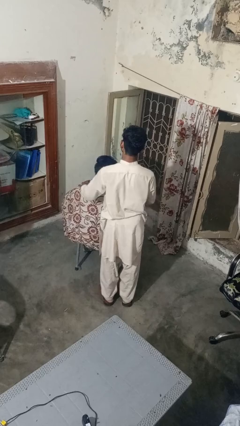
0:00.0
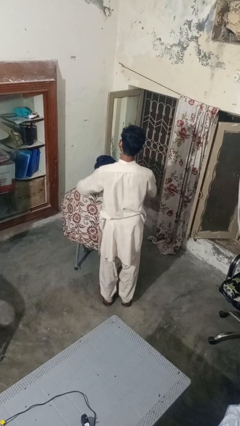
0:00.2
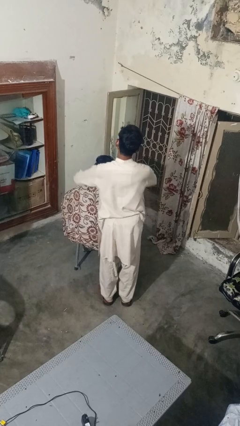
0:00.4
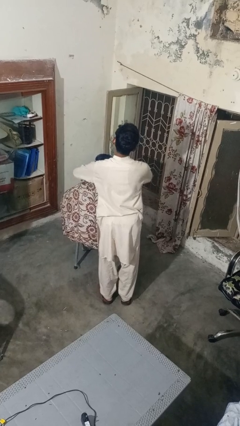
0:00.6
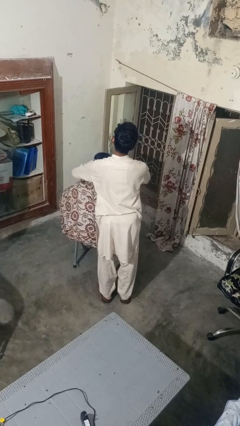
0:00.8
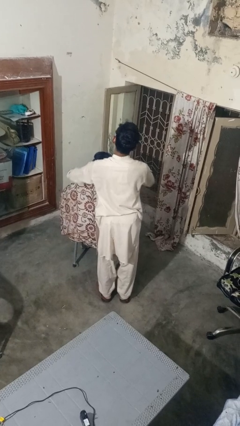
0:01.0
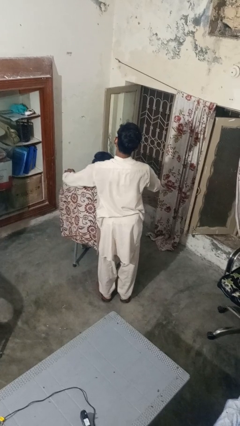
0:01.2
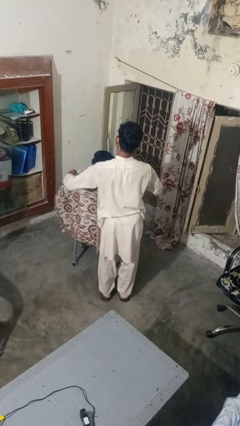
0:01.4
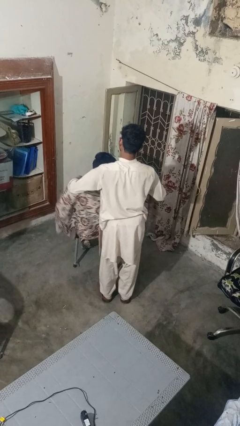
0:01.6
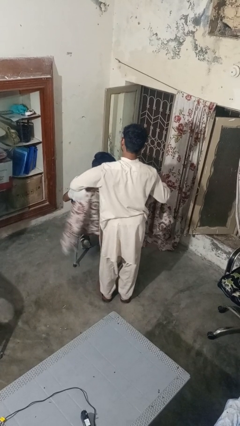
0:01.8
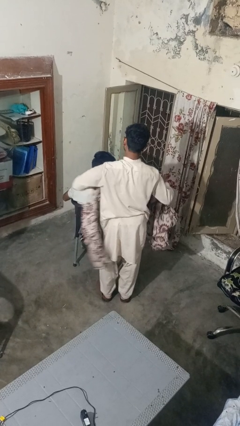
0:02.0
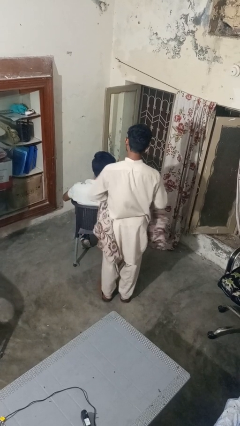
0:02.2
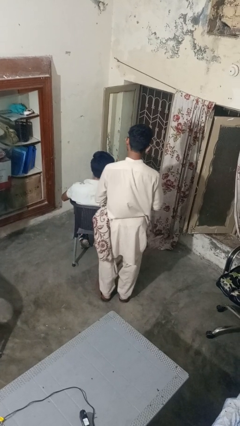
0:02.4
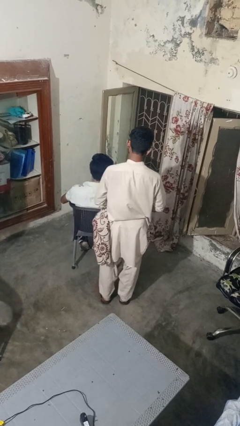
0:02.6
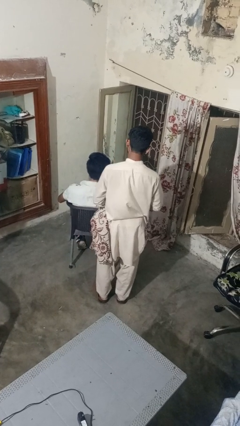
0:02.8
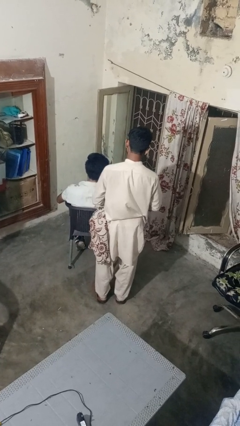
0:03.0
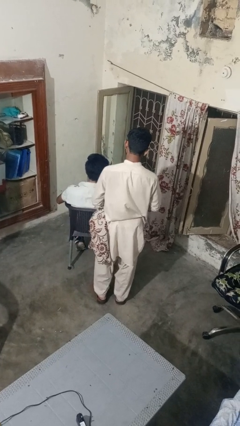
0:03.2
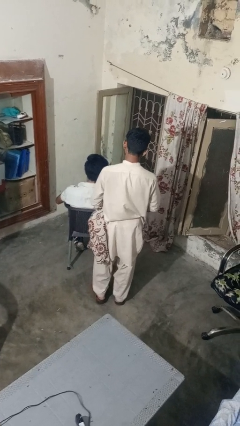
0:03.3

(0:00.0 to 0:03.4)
person uncovers friend with blanket

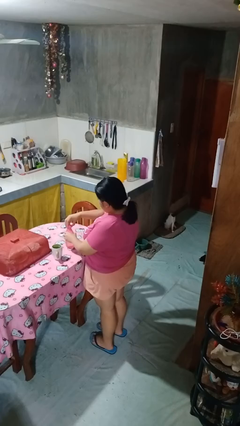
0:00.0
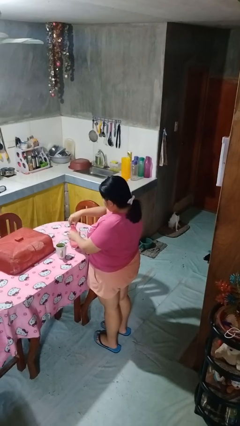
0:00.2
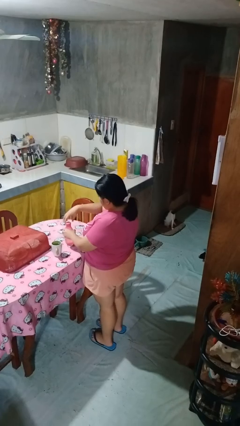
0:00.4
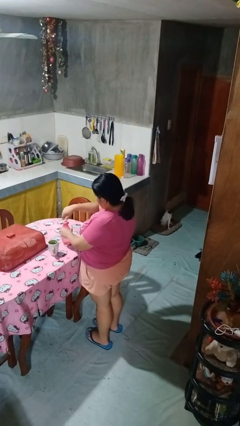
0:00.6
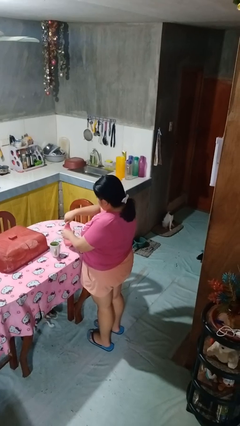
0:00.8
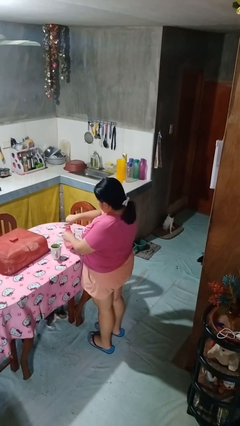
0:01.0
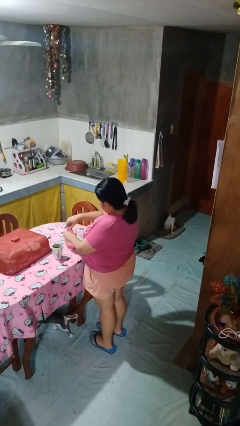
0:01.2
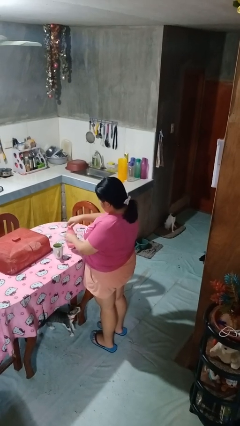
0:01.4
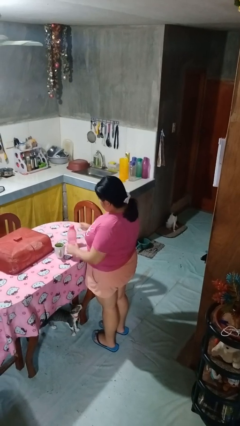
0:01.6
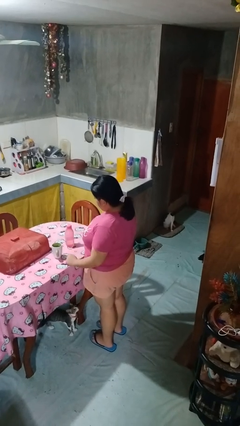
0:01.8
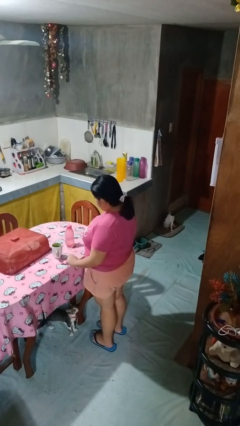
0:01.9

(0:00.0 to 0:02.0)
person screws lid to bottle

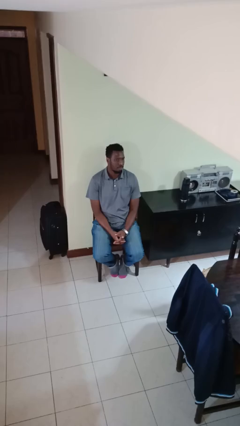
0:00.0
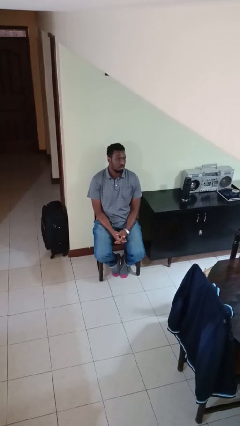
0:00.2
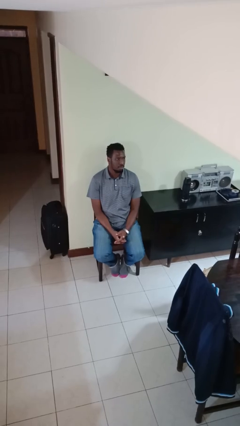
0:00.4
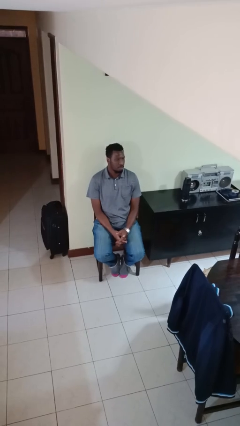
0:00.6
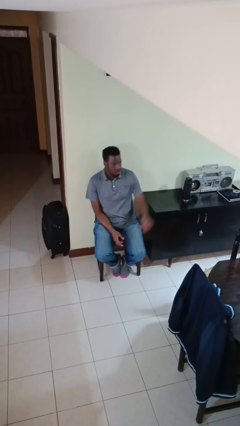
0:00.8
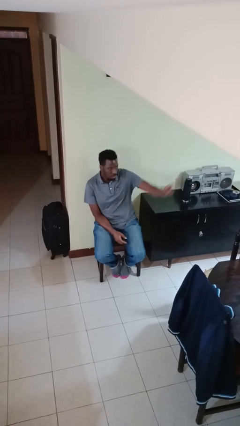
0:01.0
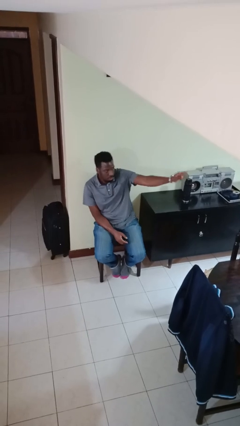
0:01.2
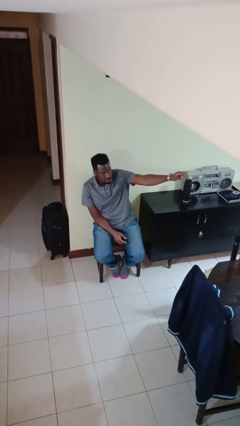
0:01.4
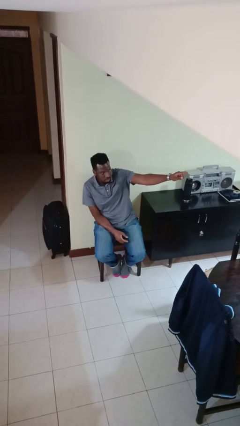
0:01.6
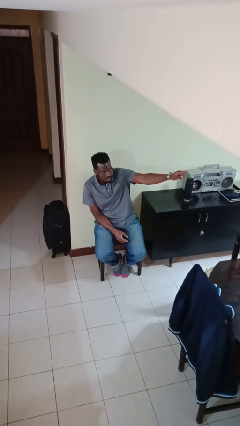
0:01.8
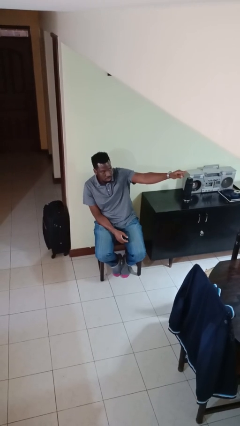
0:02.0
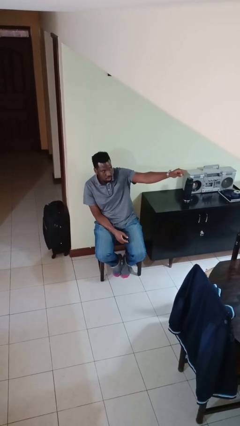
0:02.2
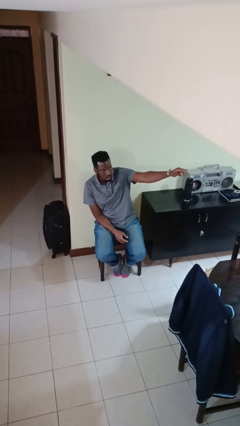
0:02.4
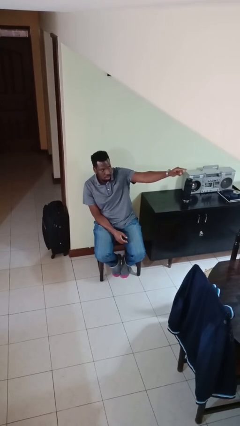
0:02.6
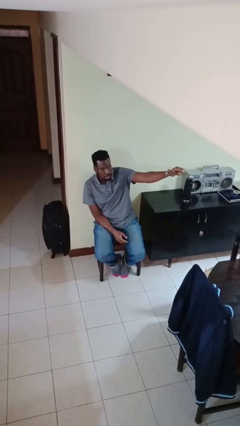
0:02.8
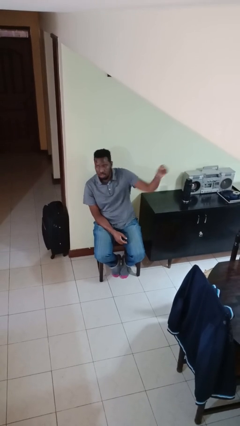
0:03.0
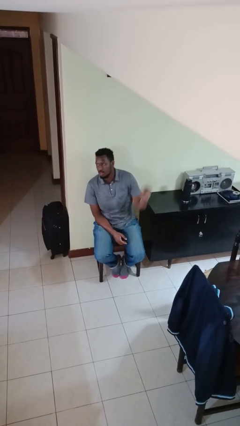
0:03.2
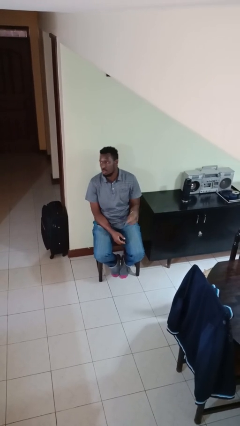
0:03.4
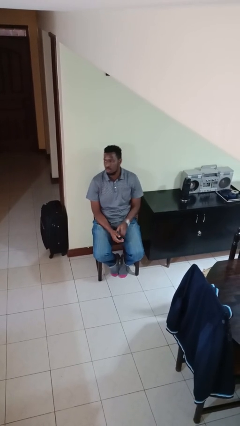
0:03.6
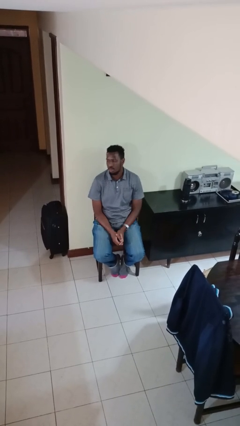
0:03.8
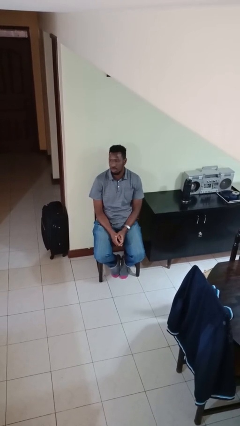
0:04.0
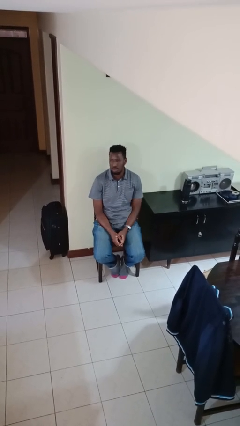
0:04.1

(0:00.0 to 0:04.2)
person points at person

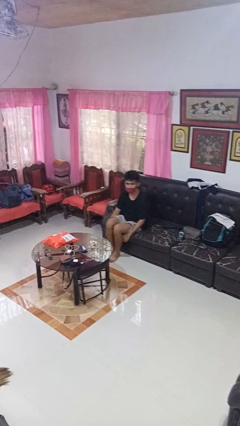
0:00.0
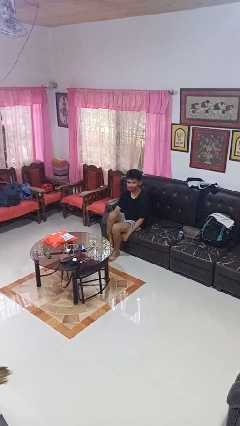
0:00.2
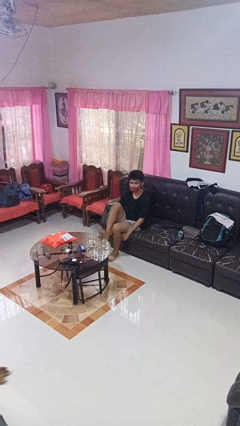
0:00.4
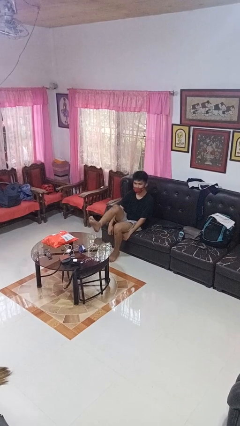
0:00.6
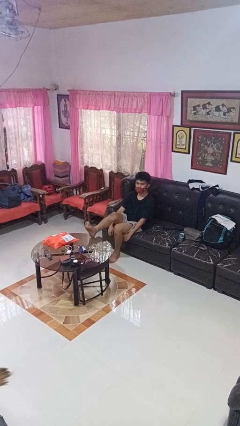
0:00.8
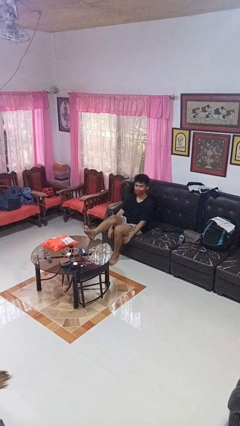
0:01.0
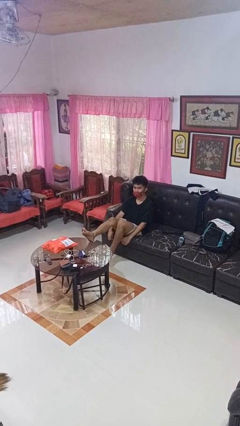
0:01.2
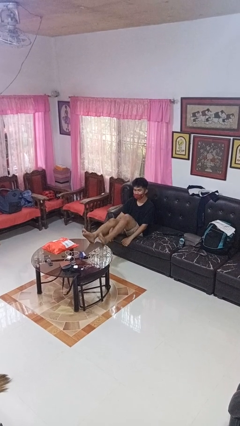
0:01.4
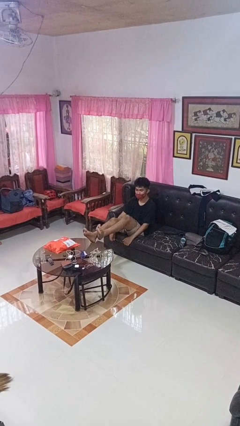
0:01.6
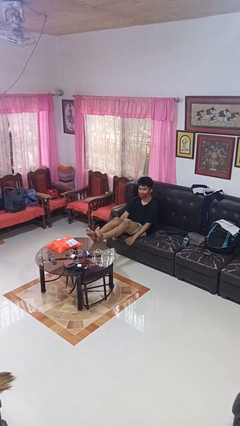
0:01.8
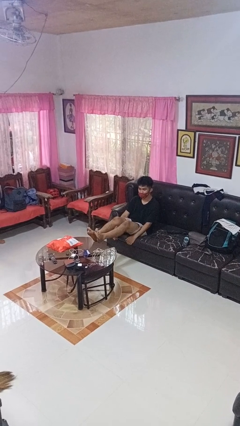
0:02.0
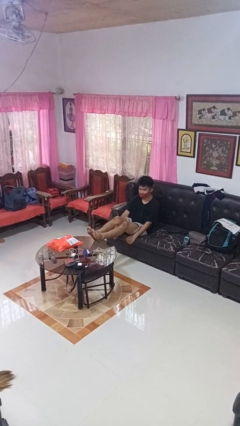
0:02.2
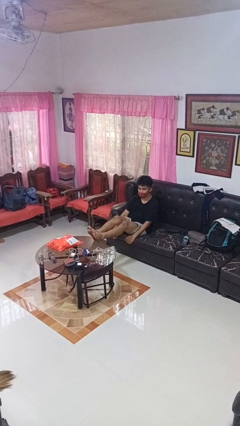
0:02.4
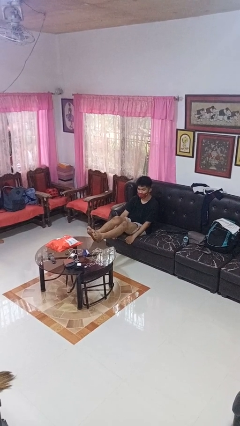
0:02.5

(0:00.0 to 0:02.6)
person puts feet up

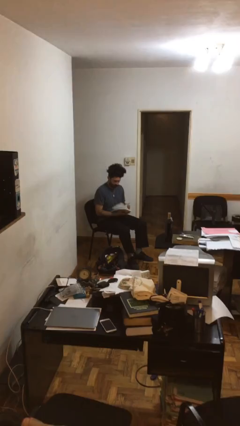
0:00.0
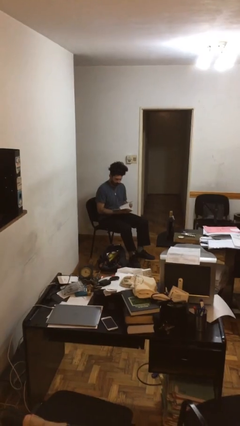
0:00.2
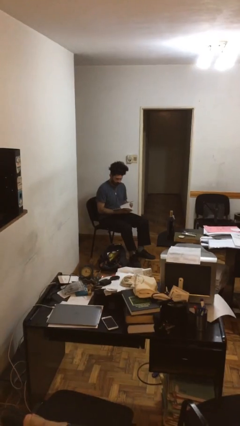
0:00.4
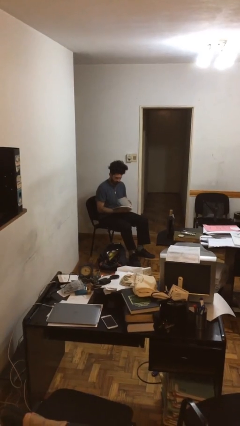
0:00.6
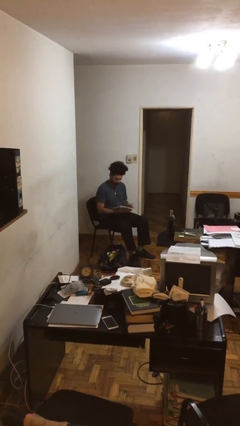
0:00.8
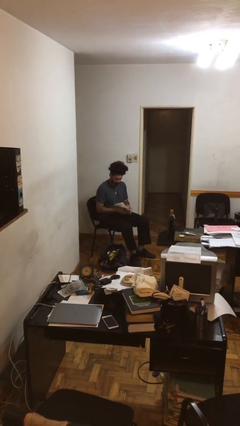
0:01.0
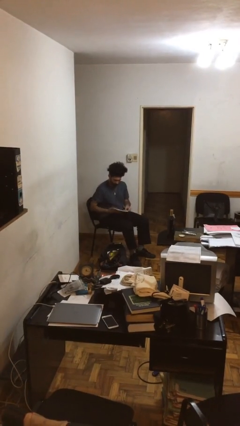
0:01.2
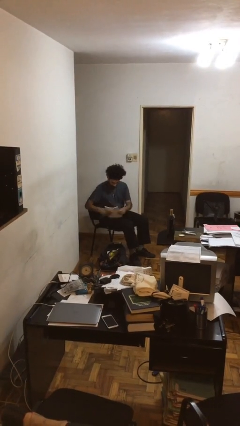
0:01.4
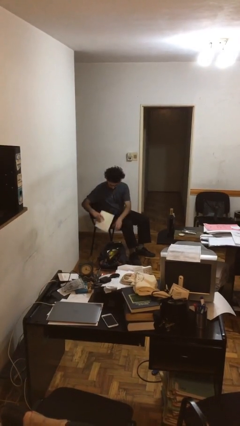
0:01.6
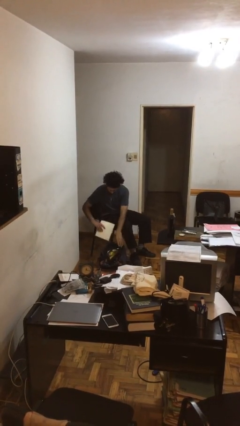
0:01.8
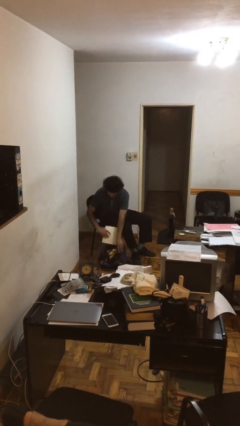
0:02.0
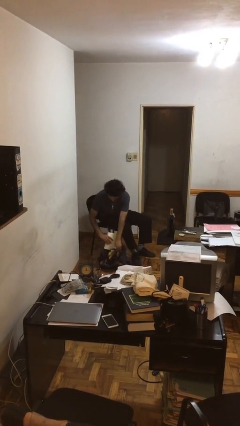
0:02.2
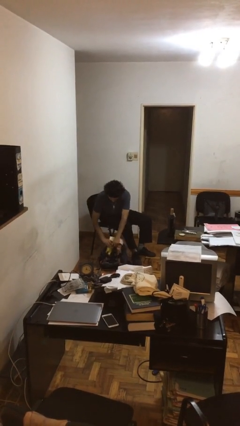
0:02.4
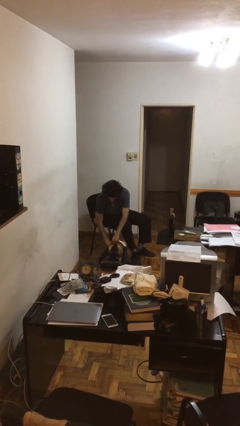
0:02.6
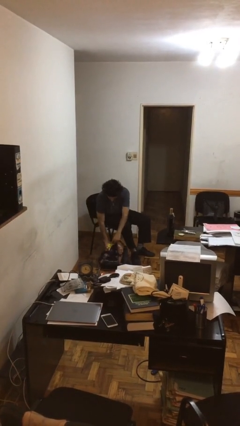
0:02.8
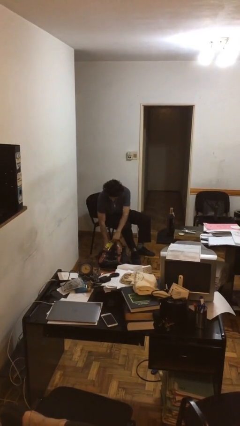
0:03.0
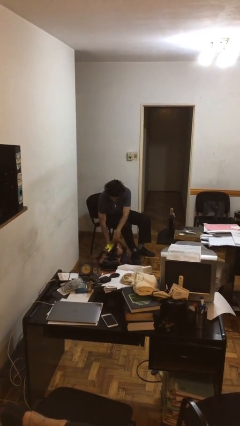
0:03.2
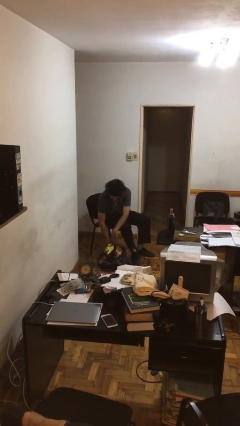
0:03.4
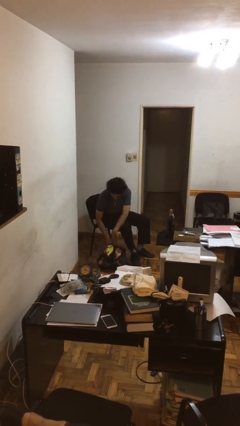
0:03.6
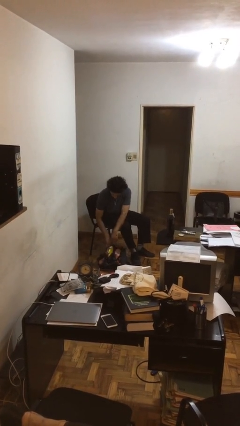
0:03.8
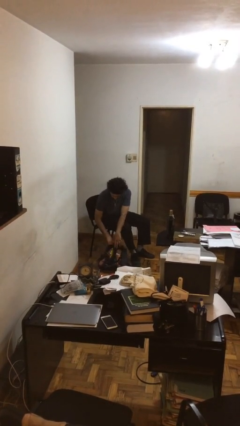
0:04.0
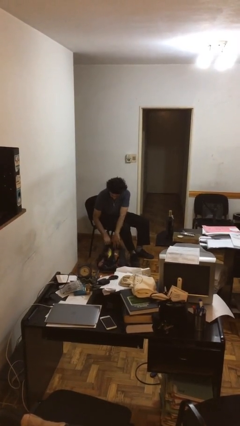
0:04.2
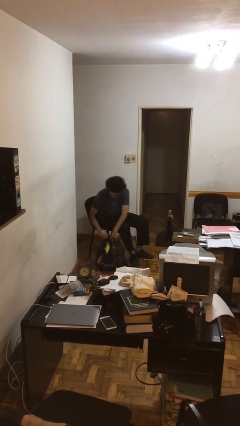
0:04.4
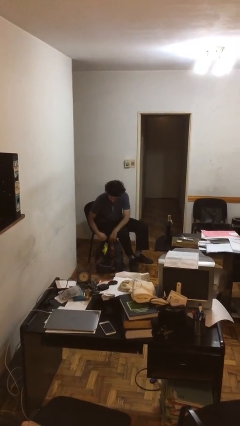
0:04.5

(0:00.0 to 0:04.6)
person puts object into backpack

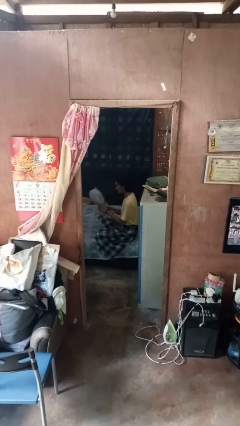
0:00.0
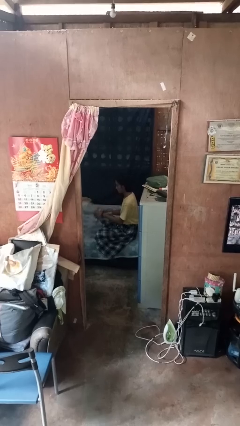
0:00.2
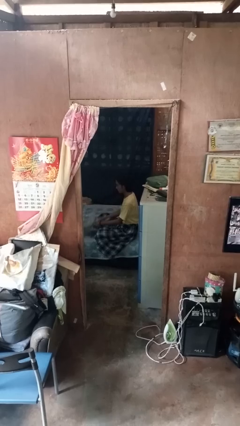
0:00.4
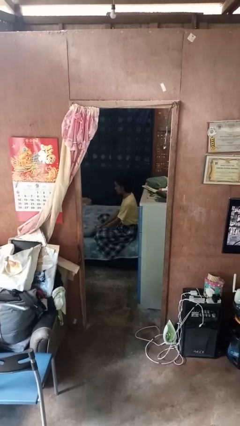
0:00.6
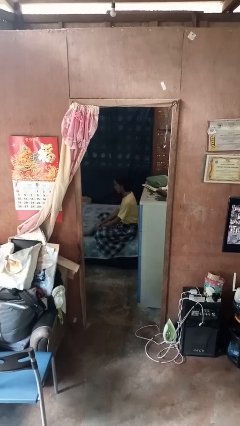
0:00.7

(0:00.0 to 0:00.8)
person puts down object on bed
